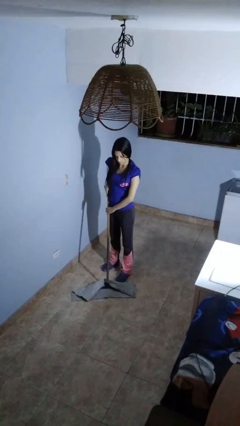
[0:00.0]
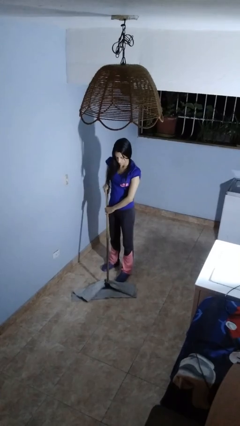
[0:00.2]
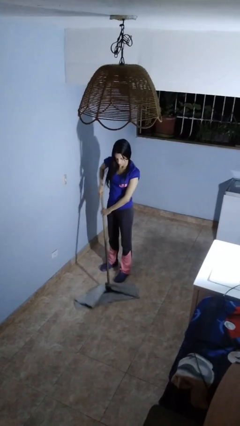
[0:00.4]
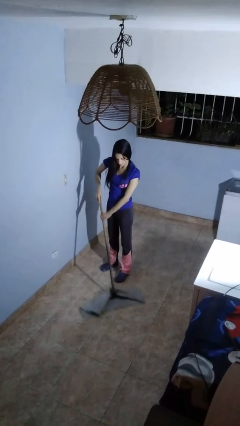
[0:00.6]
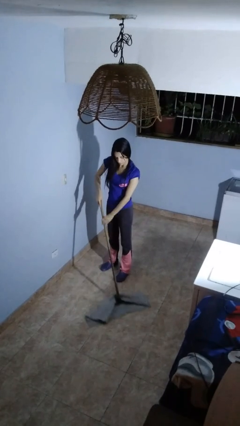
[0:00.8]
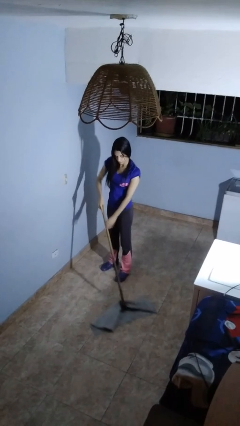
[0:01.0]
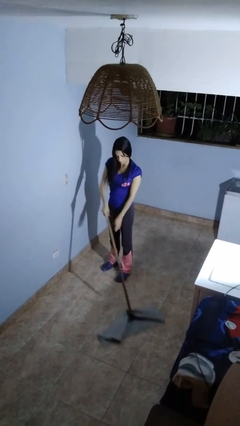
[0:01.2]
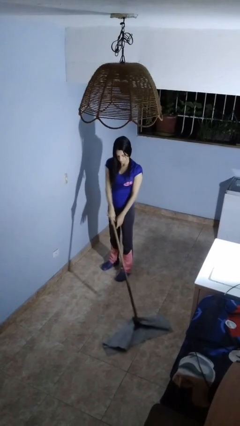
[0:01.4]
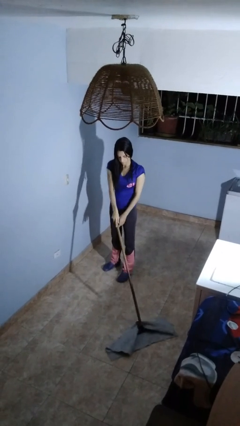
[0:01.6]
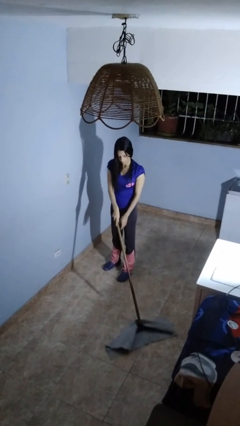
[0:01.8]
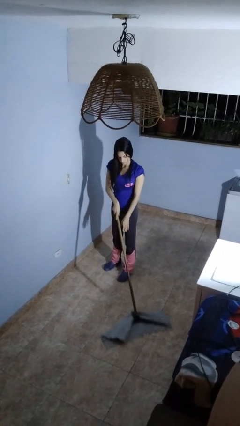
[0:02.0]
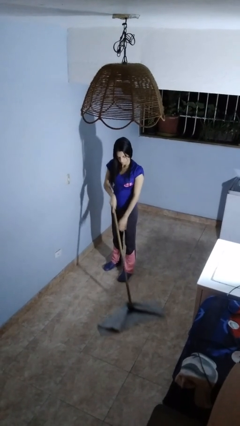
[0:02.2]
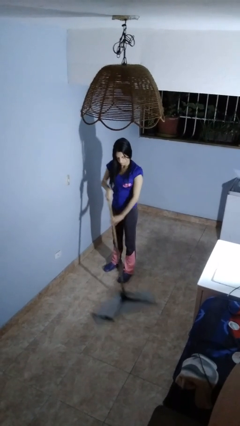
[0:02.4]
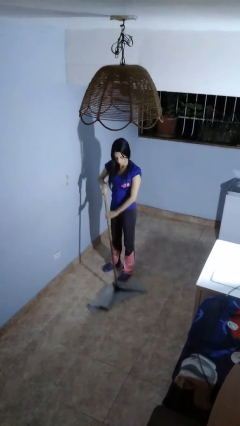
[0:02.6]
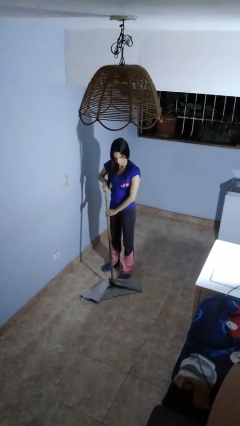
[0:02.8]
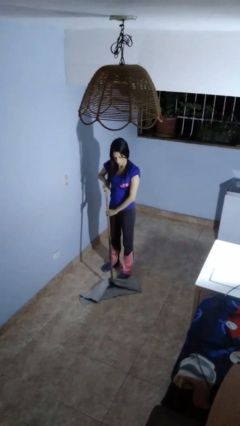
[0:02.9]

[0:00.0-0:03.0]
person mops

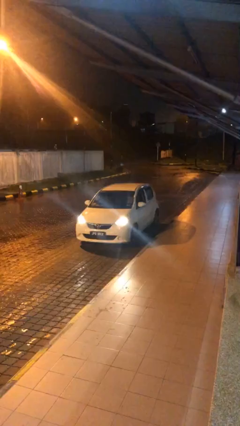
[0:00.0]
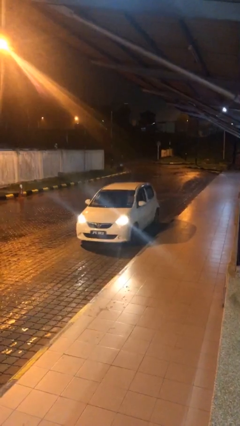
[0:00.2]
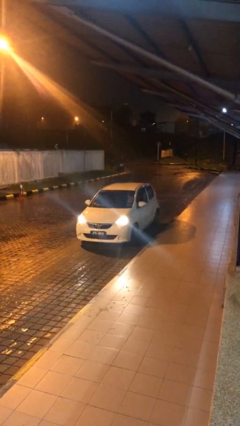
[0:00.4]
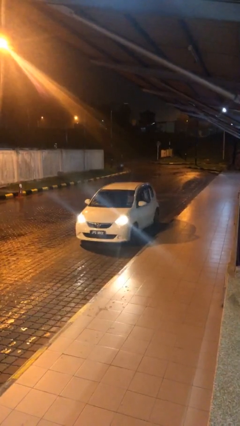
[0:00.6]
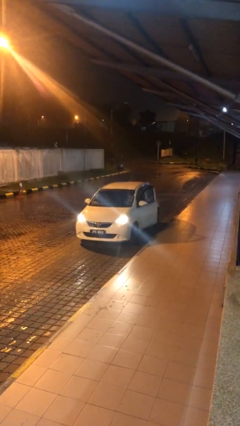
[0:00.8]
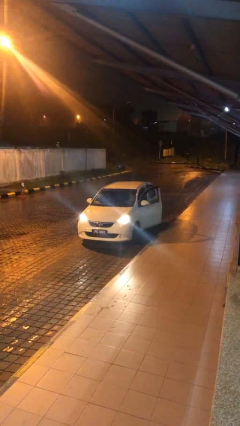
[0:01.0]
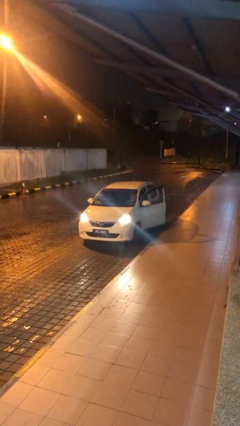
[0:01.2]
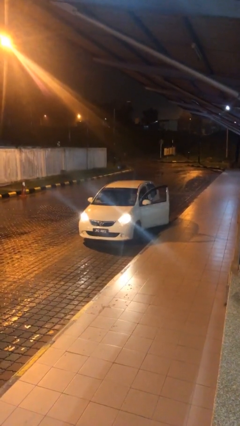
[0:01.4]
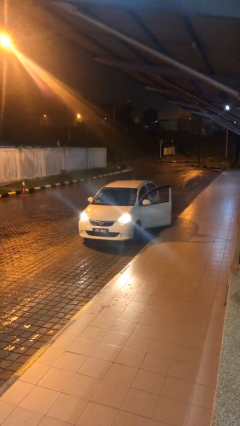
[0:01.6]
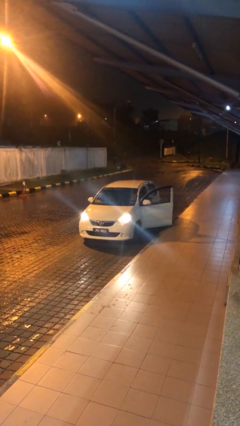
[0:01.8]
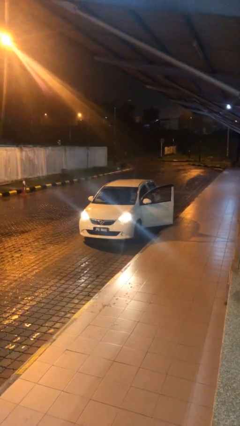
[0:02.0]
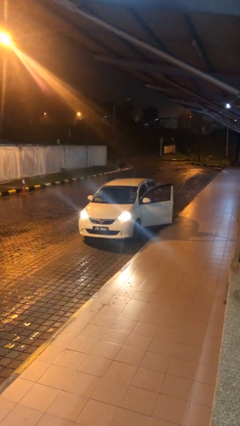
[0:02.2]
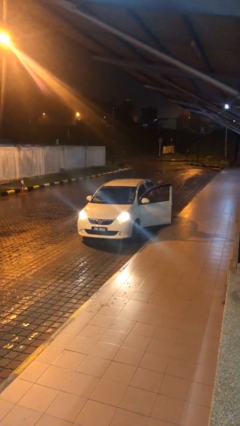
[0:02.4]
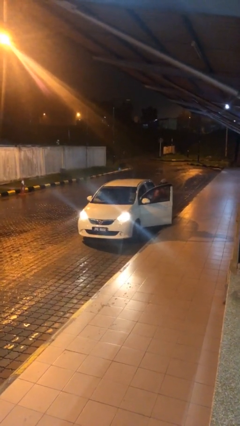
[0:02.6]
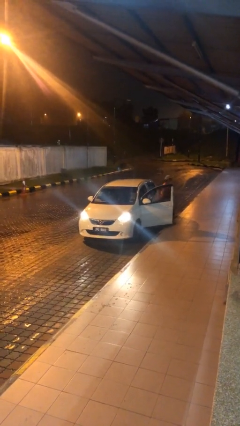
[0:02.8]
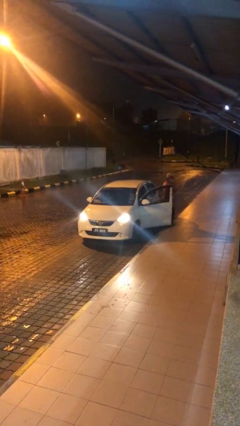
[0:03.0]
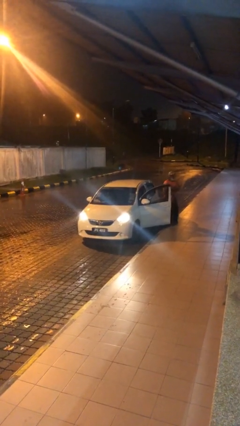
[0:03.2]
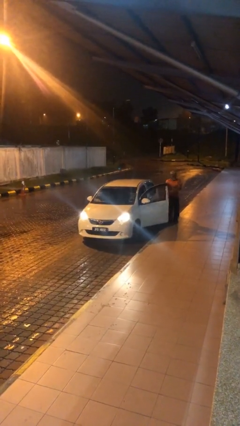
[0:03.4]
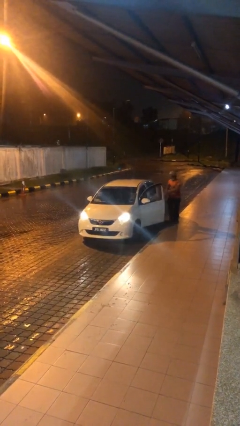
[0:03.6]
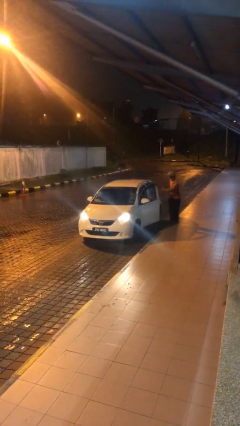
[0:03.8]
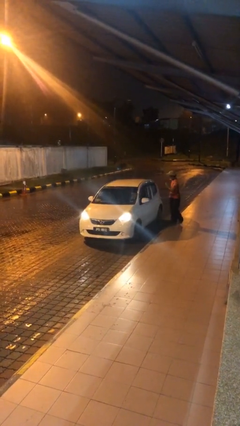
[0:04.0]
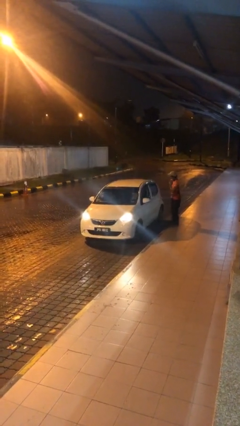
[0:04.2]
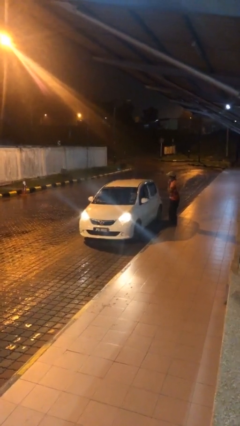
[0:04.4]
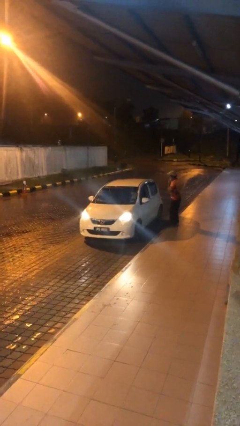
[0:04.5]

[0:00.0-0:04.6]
car drops off person

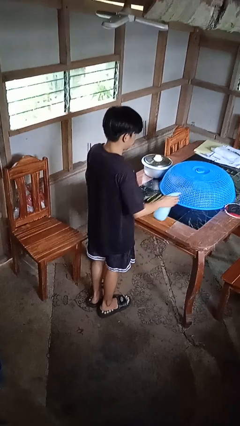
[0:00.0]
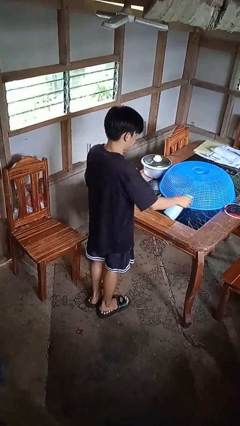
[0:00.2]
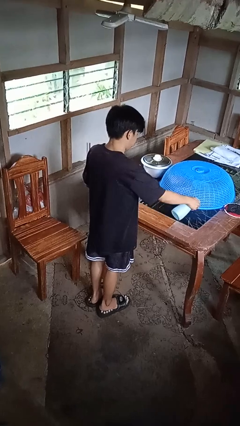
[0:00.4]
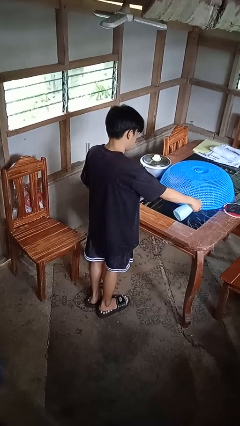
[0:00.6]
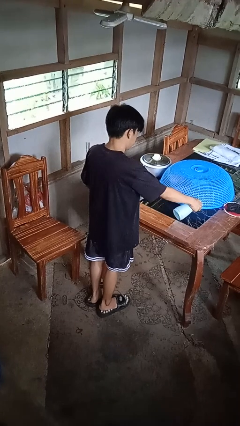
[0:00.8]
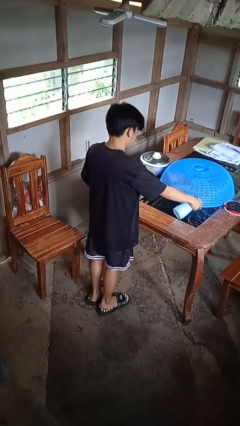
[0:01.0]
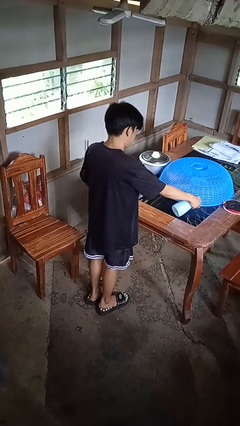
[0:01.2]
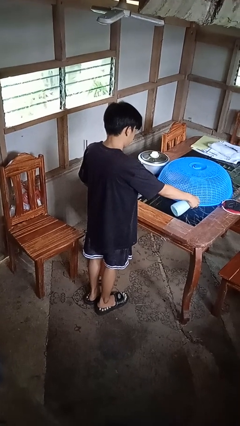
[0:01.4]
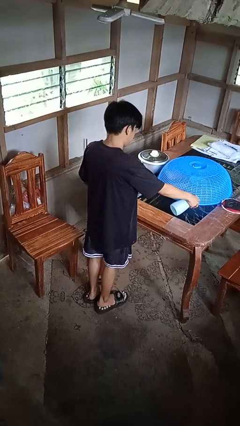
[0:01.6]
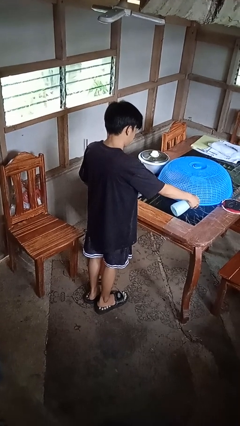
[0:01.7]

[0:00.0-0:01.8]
person sprays from bottle

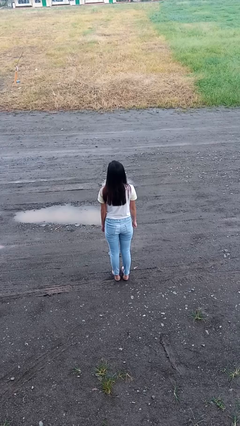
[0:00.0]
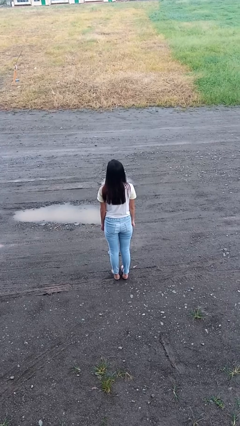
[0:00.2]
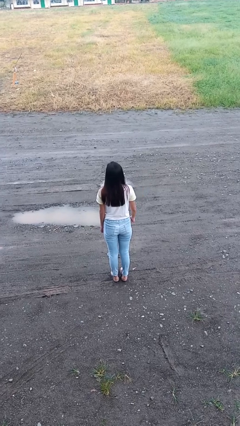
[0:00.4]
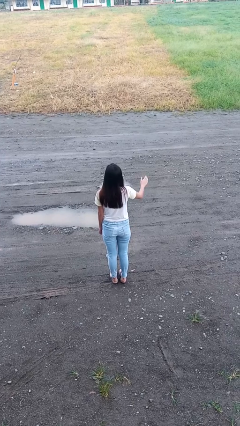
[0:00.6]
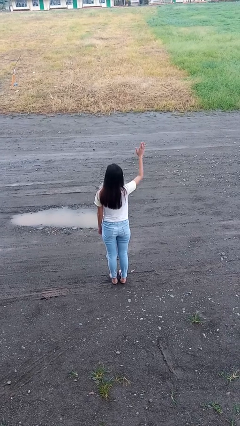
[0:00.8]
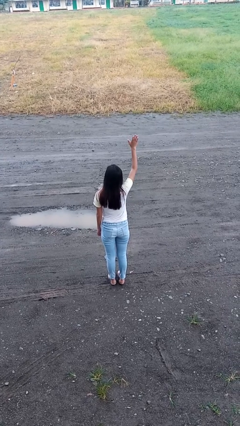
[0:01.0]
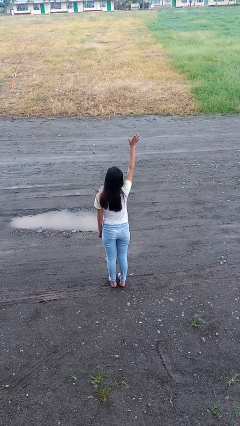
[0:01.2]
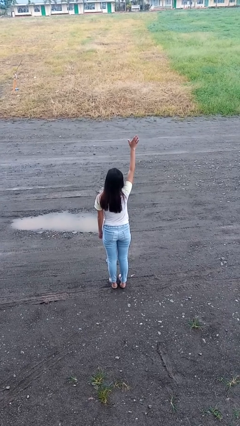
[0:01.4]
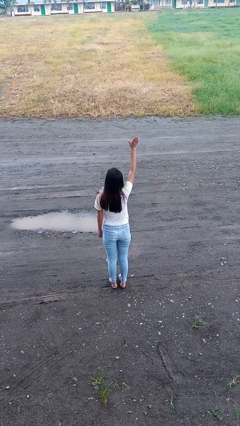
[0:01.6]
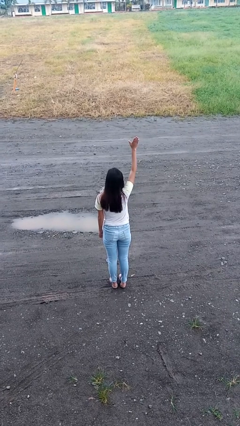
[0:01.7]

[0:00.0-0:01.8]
person gestures raise hand

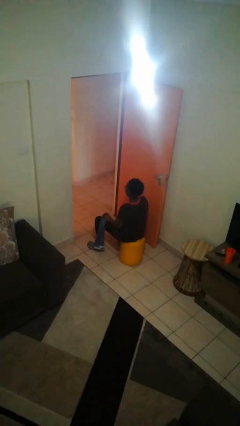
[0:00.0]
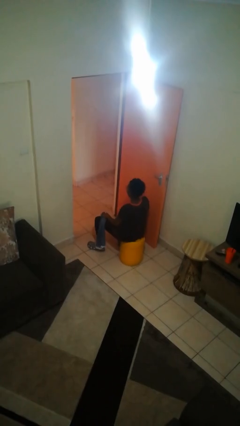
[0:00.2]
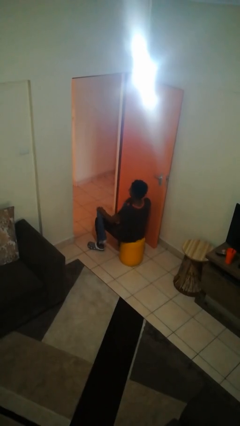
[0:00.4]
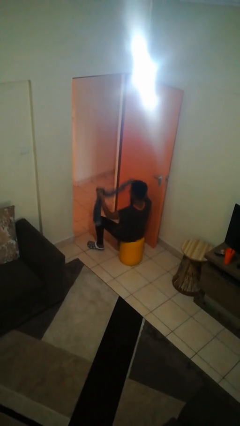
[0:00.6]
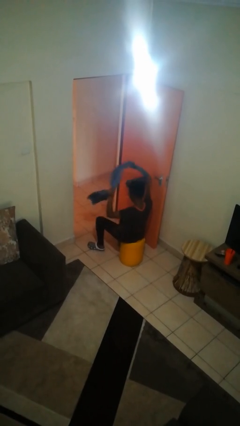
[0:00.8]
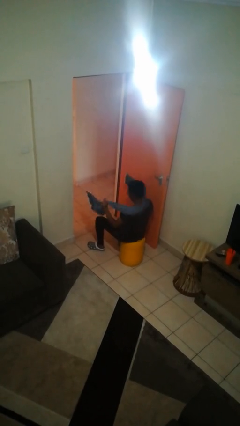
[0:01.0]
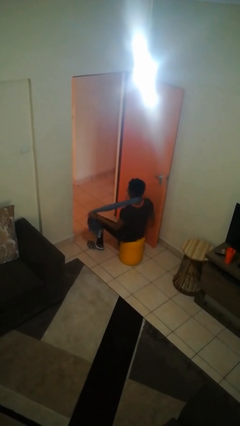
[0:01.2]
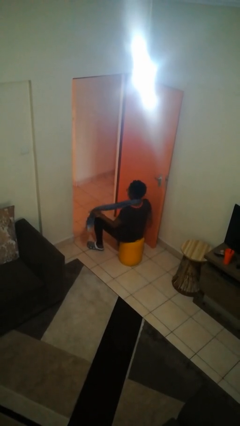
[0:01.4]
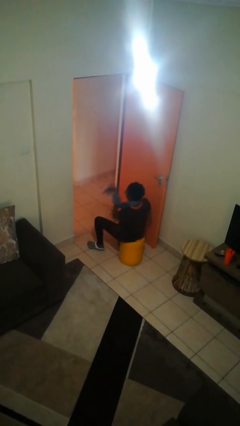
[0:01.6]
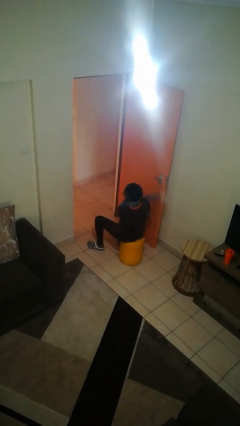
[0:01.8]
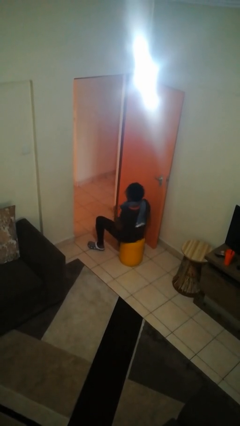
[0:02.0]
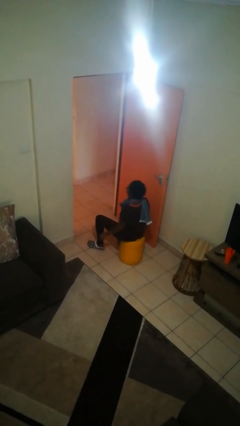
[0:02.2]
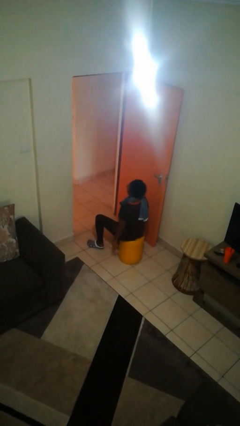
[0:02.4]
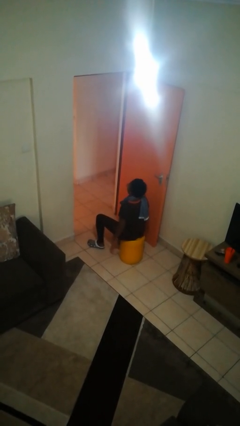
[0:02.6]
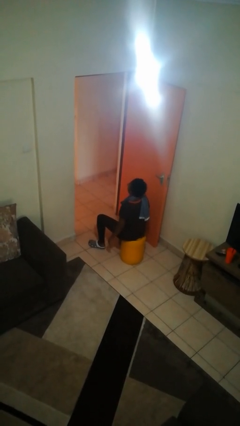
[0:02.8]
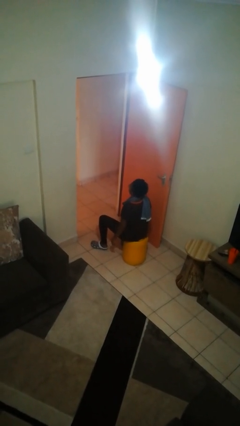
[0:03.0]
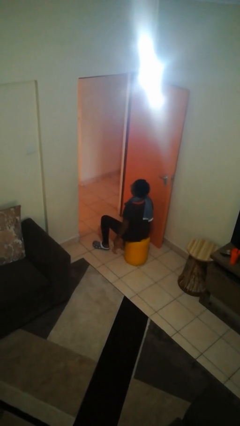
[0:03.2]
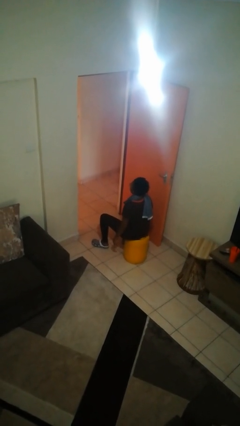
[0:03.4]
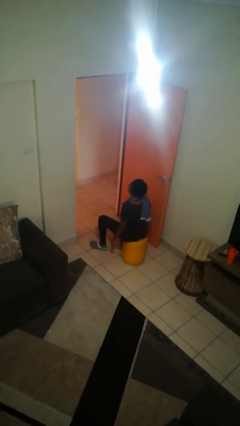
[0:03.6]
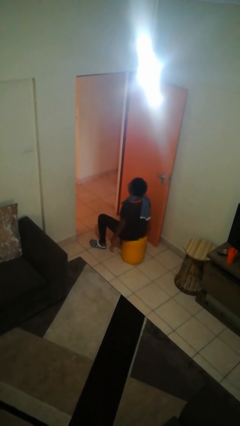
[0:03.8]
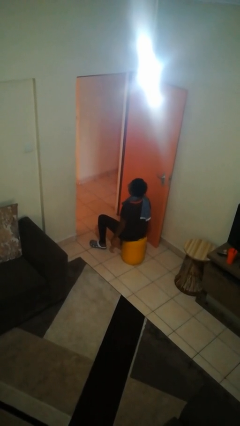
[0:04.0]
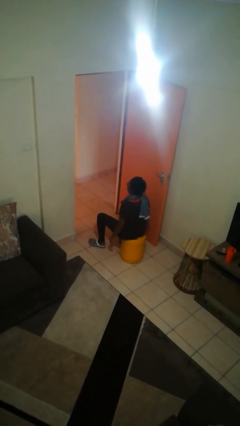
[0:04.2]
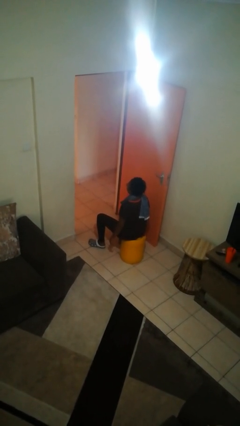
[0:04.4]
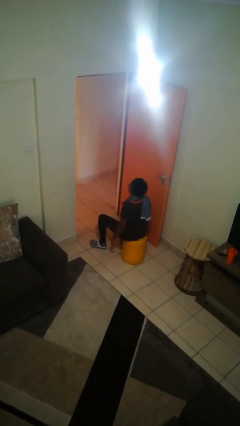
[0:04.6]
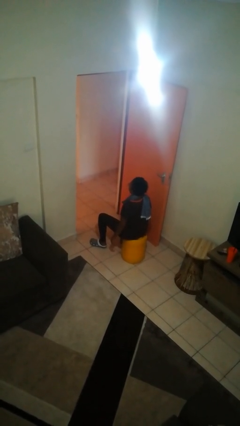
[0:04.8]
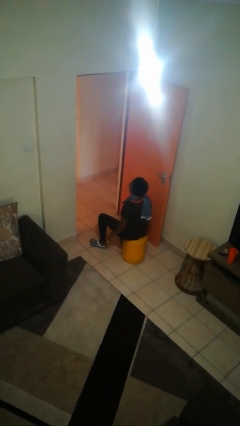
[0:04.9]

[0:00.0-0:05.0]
person puts on scarf

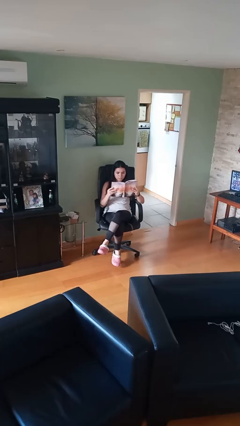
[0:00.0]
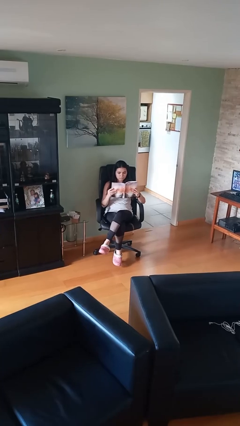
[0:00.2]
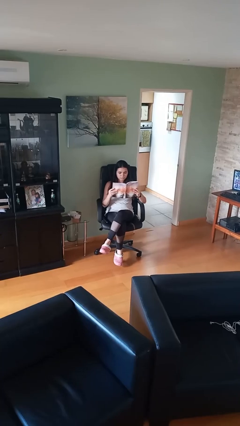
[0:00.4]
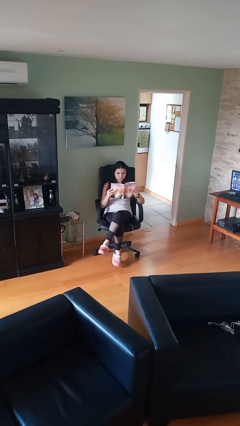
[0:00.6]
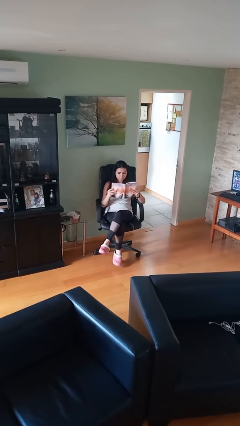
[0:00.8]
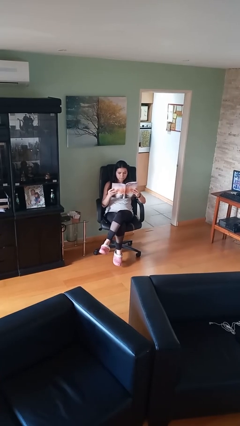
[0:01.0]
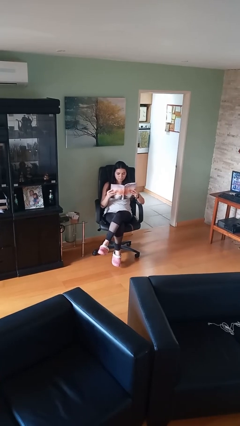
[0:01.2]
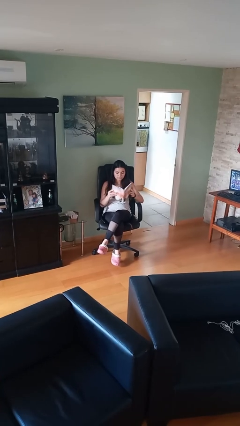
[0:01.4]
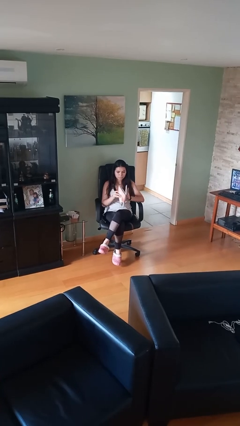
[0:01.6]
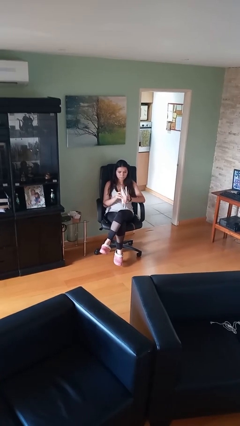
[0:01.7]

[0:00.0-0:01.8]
person reads document
